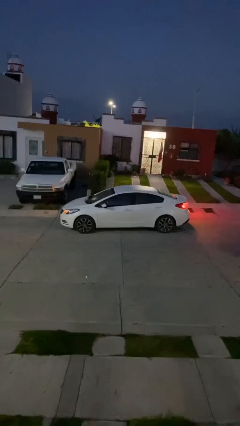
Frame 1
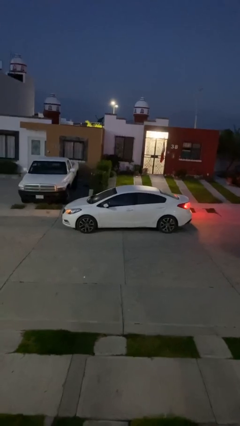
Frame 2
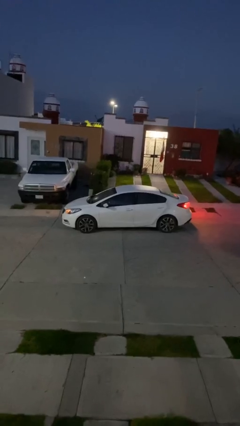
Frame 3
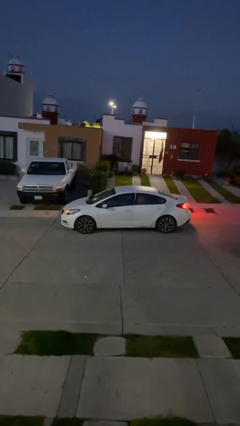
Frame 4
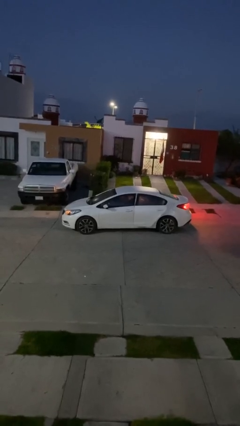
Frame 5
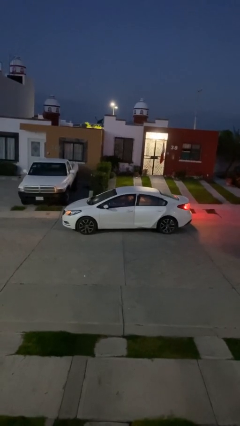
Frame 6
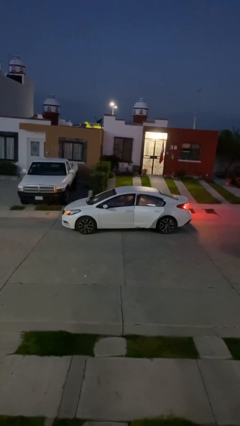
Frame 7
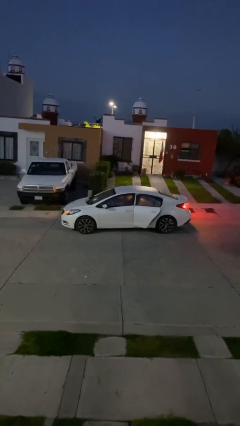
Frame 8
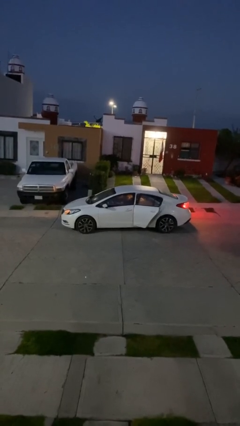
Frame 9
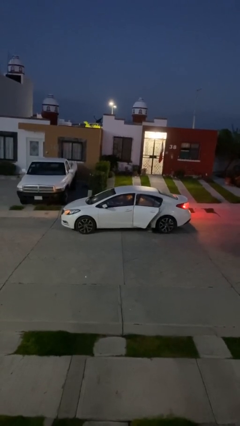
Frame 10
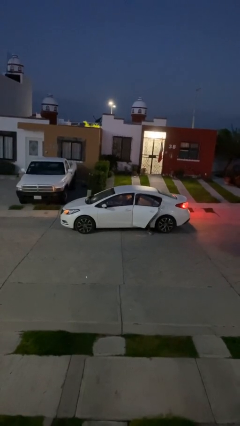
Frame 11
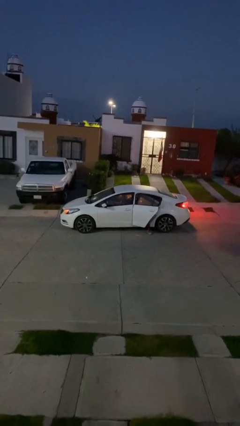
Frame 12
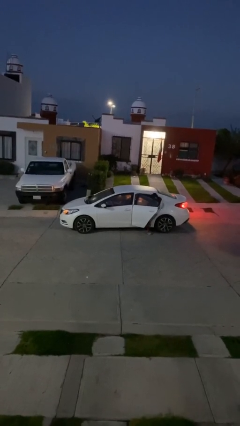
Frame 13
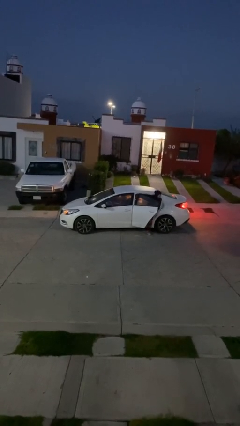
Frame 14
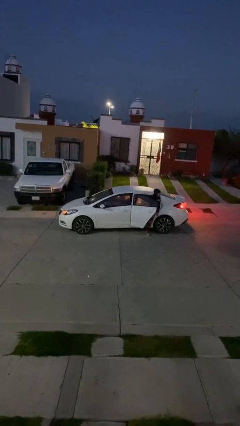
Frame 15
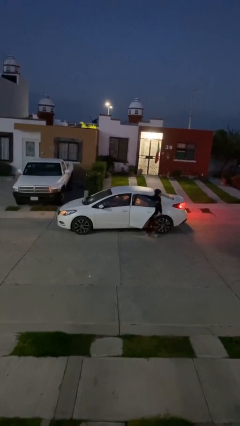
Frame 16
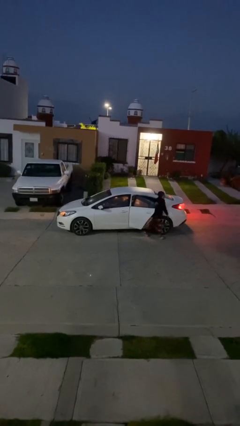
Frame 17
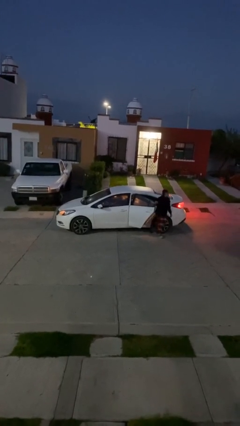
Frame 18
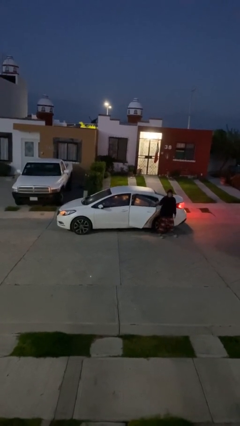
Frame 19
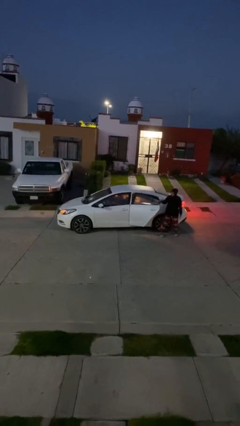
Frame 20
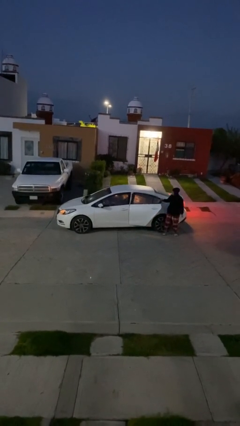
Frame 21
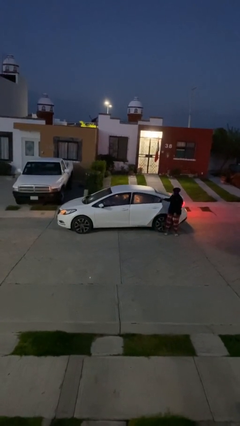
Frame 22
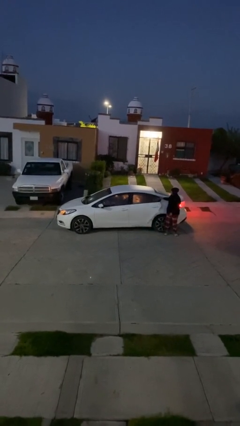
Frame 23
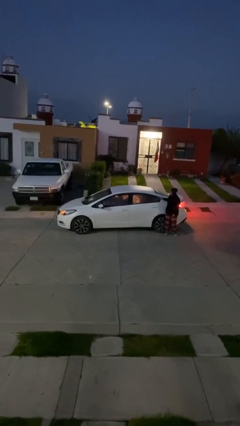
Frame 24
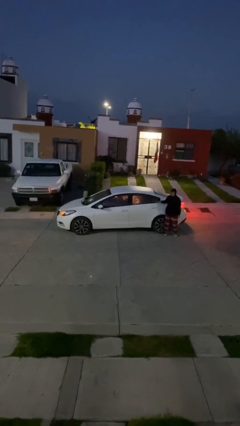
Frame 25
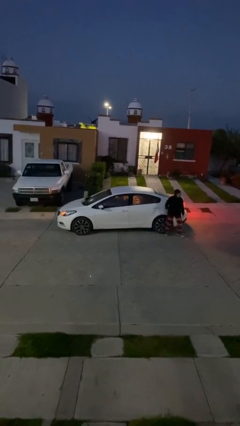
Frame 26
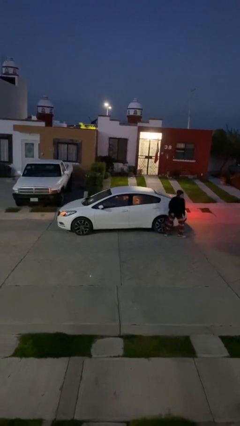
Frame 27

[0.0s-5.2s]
car drops off person

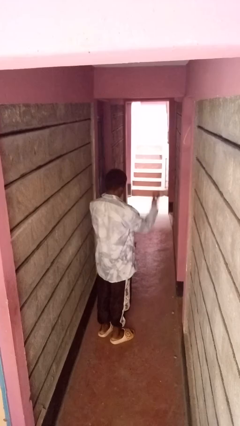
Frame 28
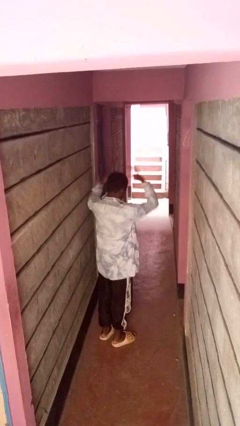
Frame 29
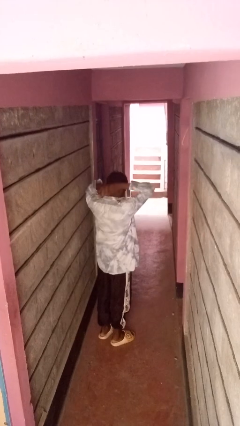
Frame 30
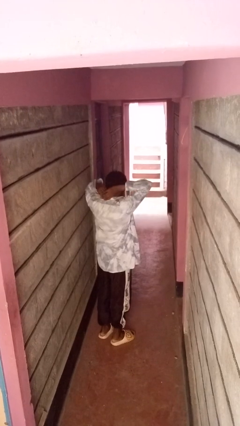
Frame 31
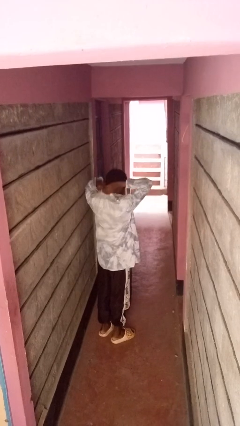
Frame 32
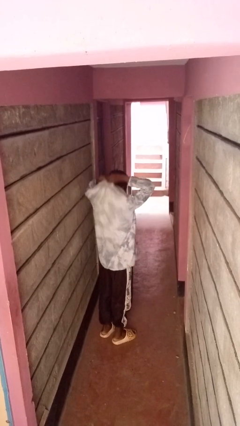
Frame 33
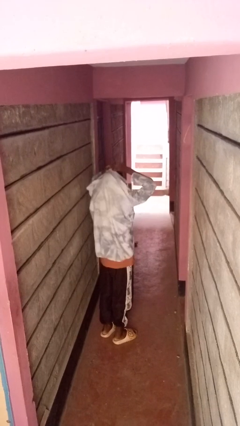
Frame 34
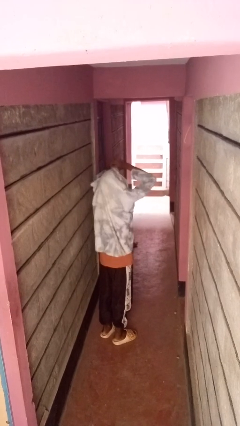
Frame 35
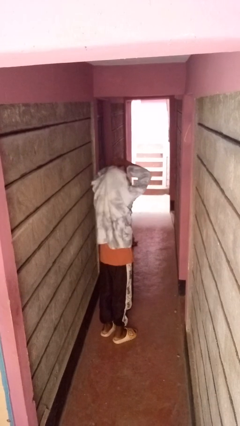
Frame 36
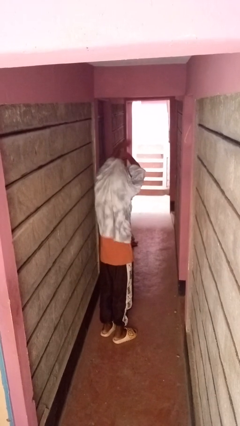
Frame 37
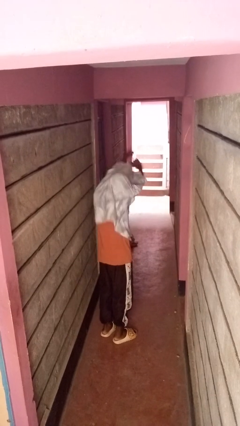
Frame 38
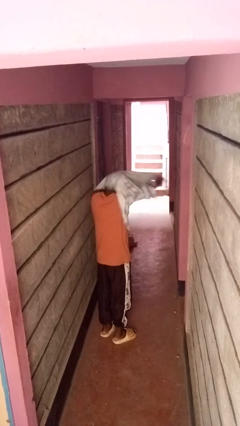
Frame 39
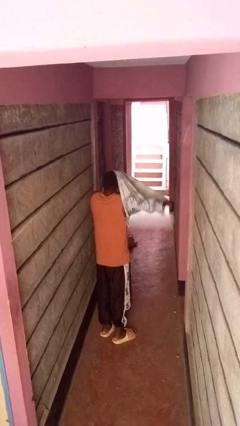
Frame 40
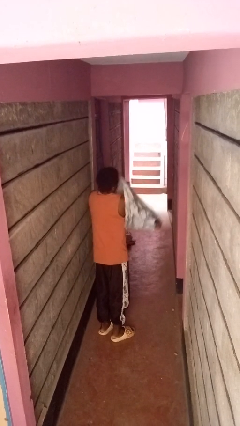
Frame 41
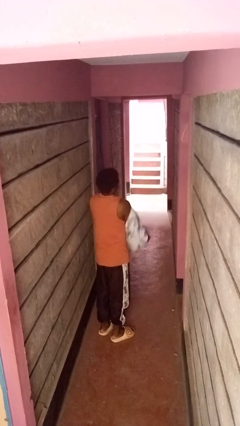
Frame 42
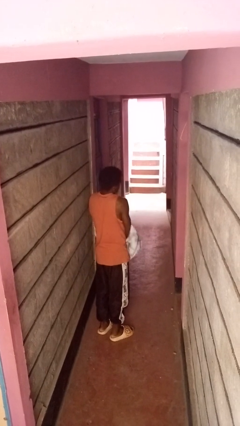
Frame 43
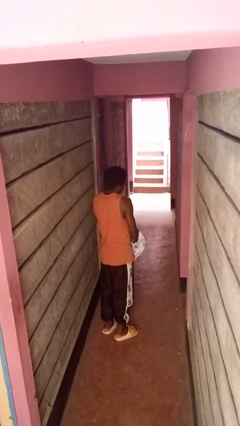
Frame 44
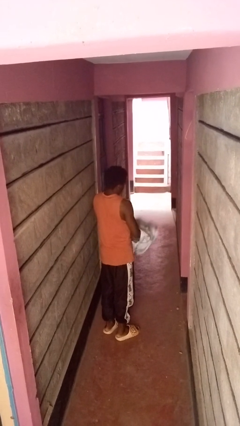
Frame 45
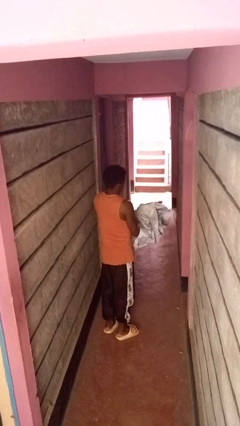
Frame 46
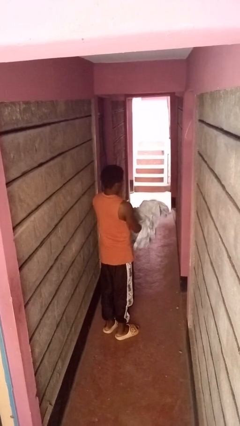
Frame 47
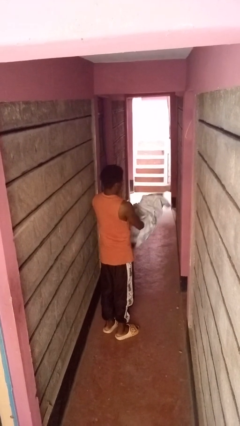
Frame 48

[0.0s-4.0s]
person takes off shirt

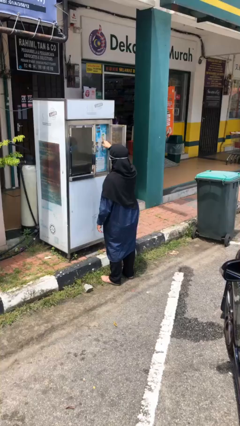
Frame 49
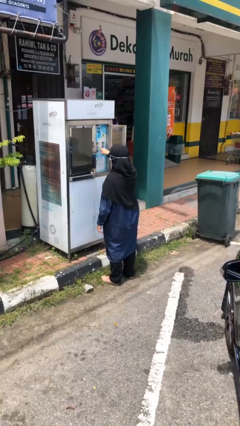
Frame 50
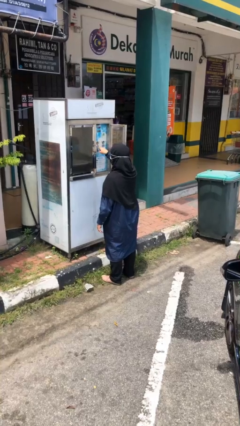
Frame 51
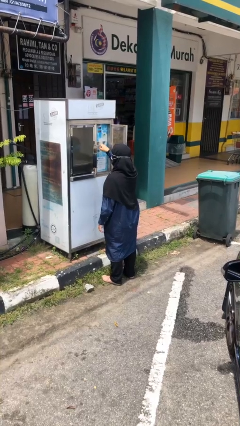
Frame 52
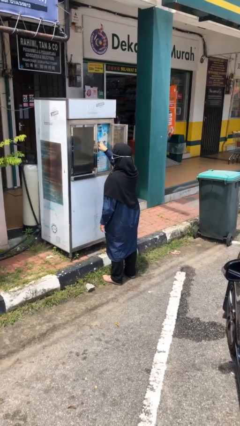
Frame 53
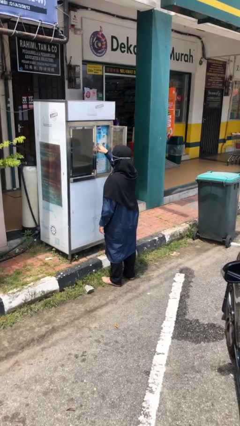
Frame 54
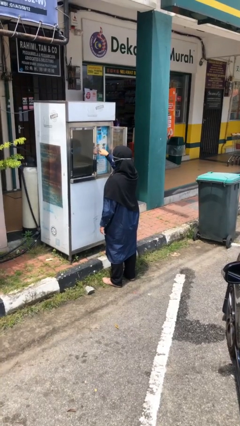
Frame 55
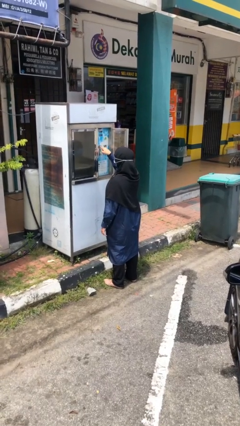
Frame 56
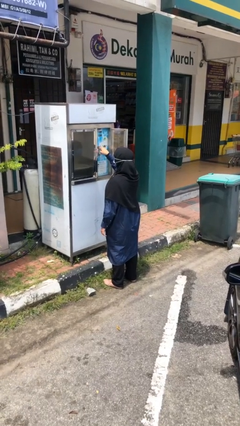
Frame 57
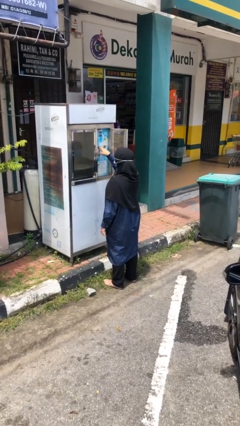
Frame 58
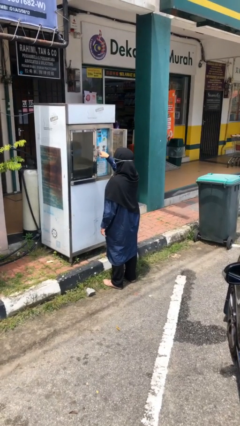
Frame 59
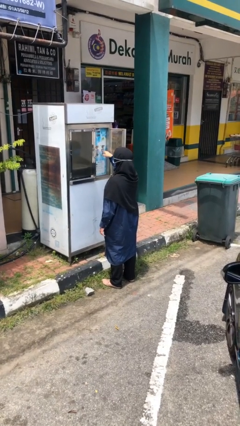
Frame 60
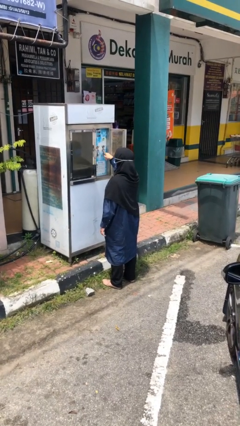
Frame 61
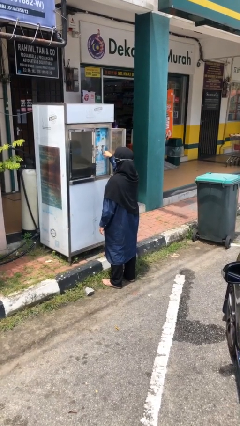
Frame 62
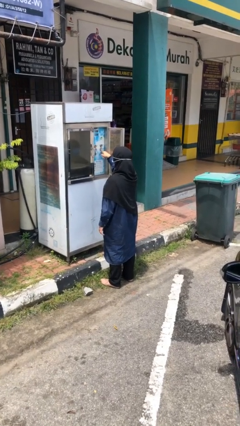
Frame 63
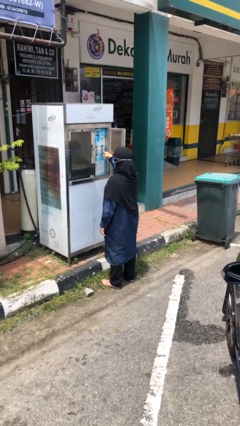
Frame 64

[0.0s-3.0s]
person purchases from machine

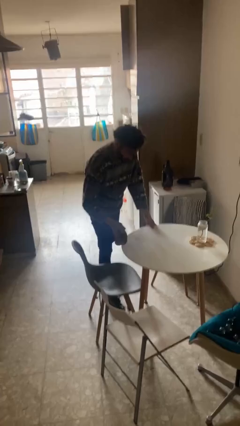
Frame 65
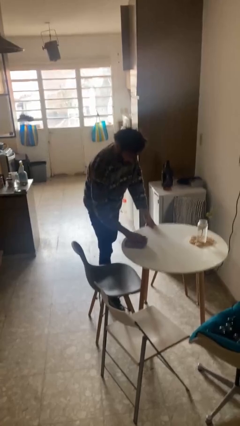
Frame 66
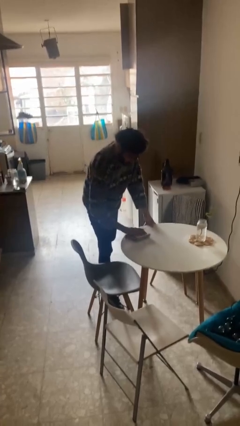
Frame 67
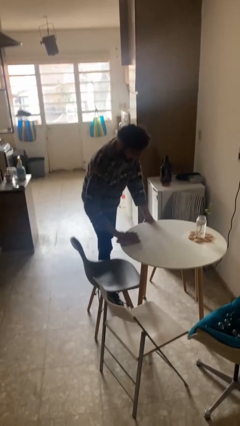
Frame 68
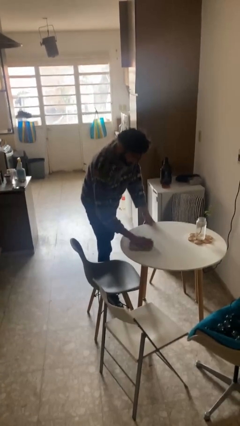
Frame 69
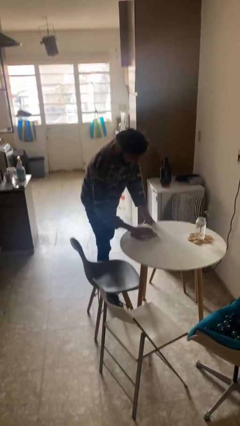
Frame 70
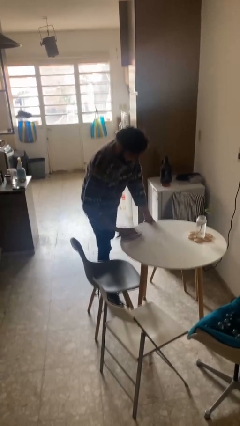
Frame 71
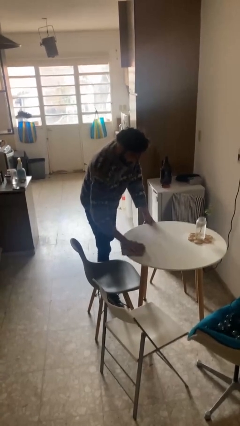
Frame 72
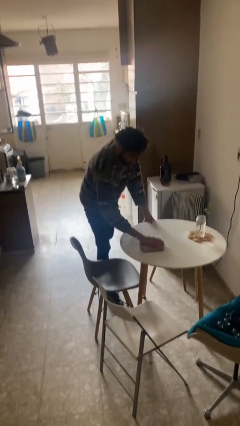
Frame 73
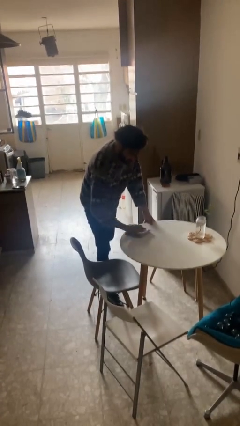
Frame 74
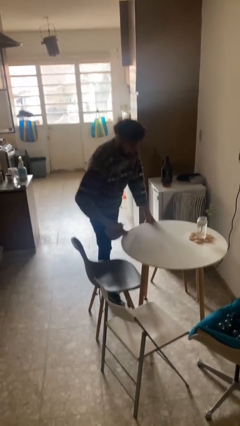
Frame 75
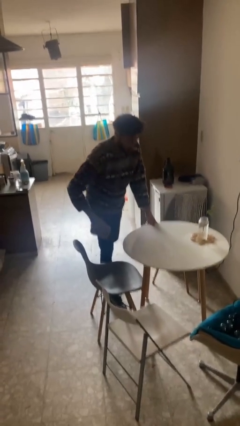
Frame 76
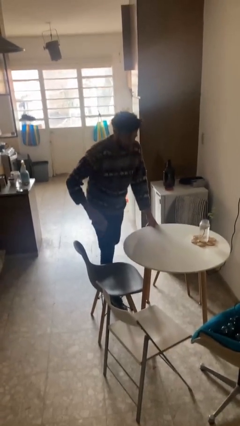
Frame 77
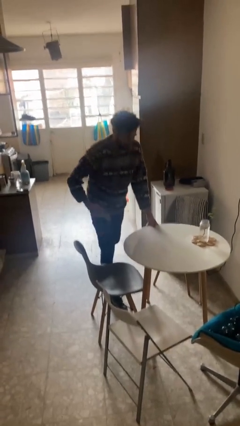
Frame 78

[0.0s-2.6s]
person cleans table with rag

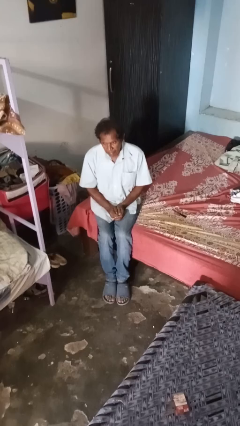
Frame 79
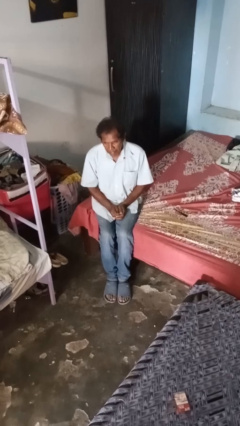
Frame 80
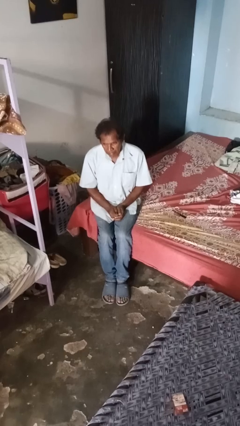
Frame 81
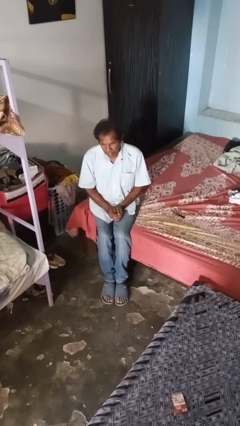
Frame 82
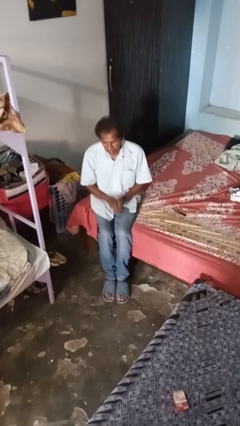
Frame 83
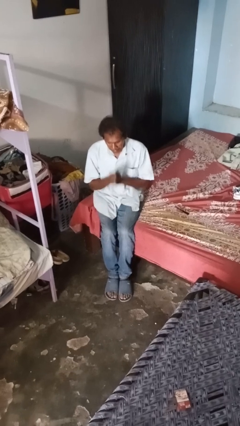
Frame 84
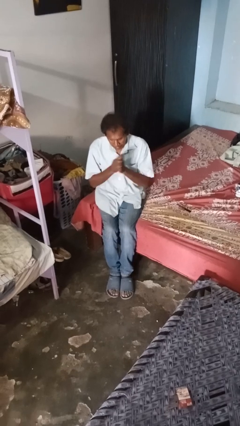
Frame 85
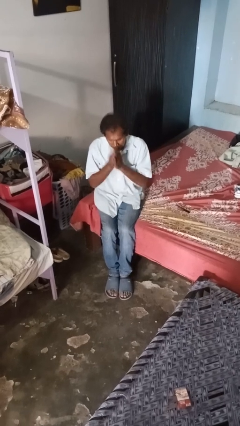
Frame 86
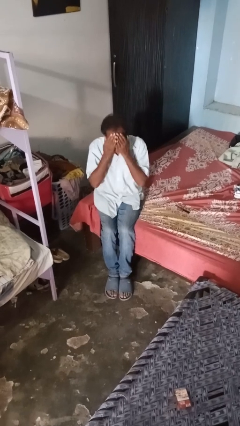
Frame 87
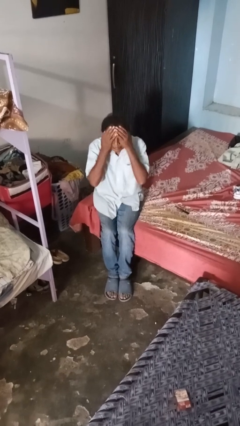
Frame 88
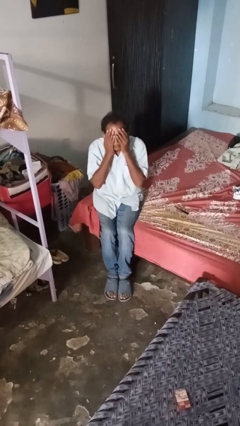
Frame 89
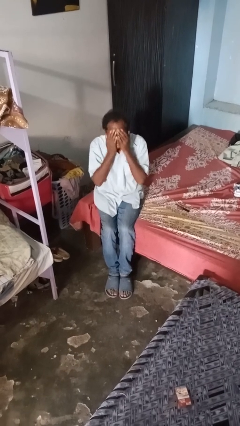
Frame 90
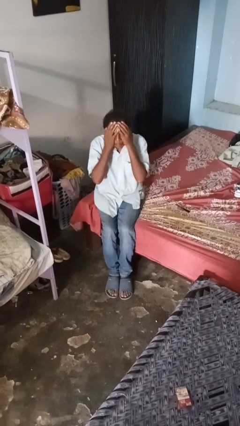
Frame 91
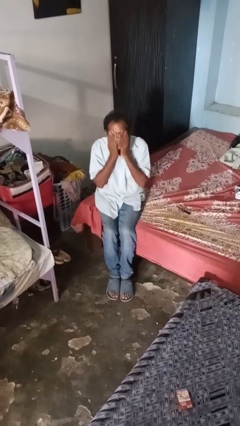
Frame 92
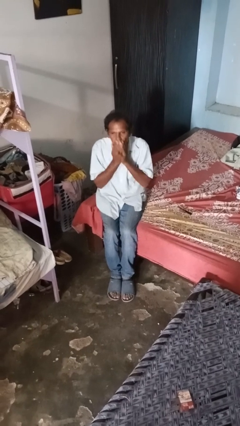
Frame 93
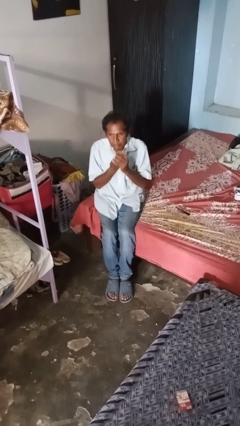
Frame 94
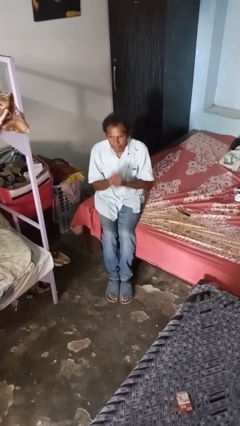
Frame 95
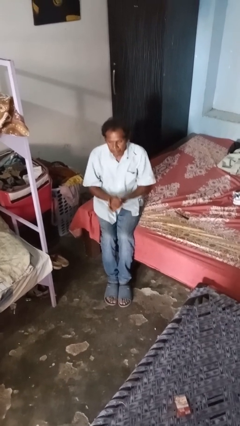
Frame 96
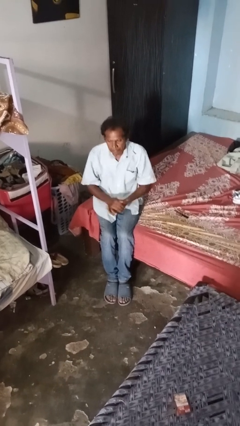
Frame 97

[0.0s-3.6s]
person applies foundation makeup
